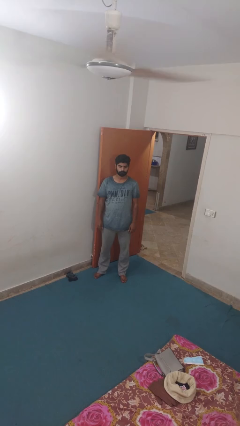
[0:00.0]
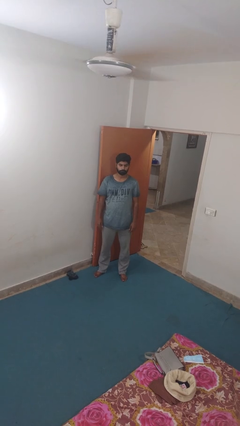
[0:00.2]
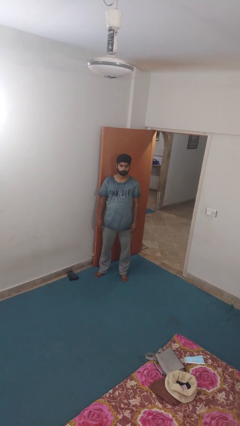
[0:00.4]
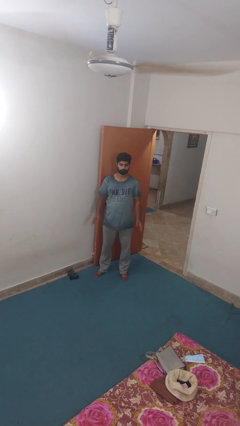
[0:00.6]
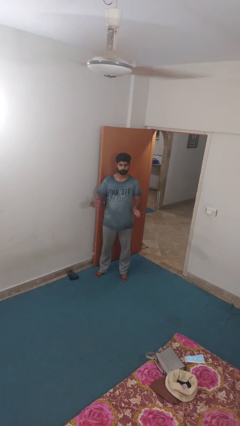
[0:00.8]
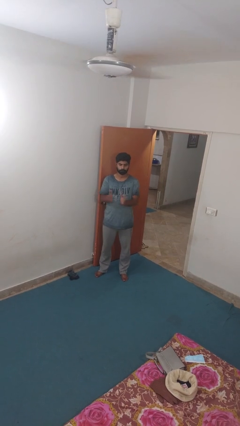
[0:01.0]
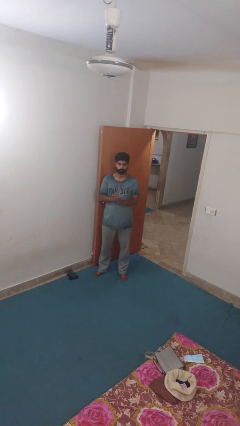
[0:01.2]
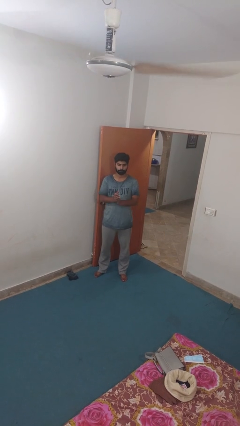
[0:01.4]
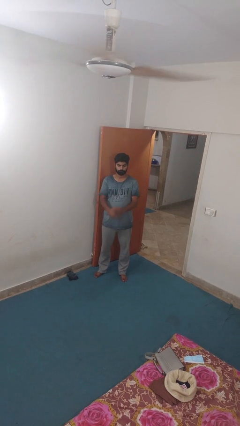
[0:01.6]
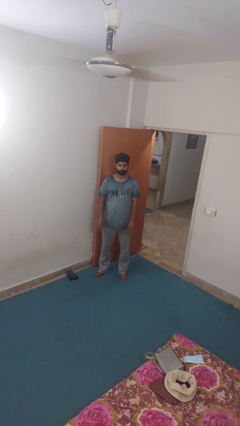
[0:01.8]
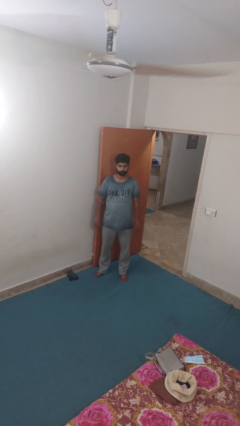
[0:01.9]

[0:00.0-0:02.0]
person claps hands

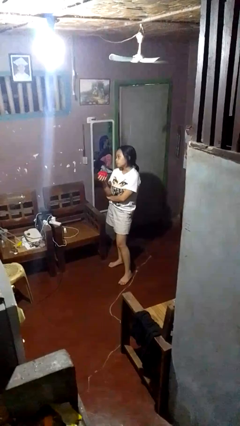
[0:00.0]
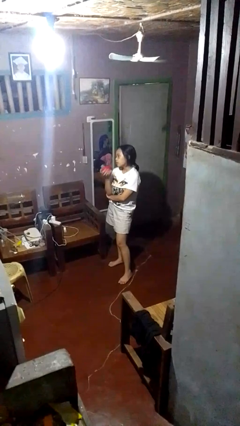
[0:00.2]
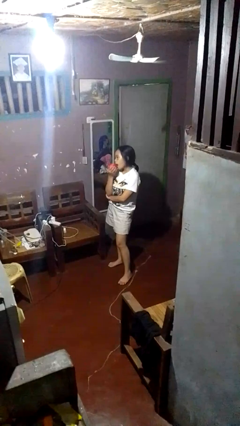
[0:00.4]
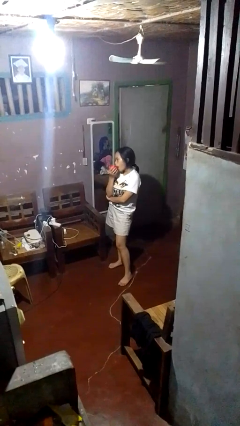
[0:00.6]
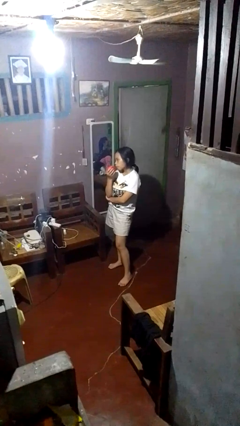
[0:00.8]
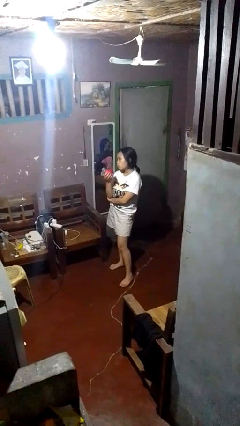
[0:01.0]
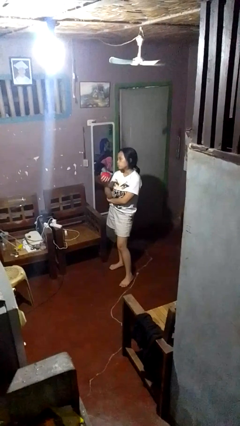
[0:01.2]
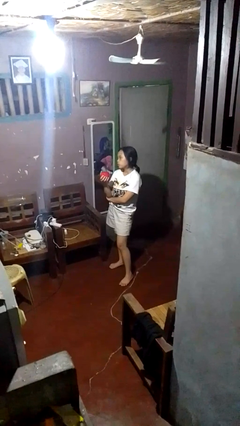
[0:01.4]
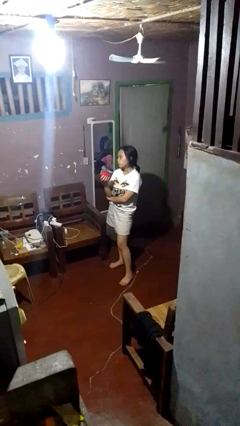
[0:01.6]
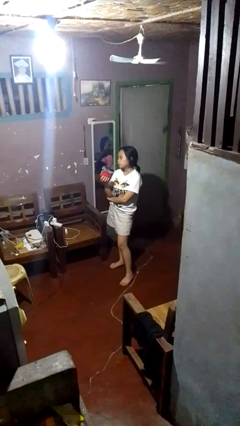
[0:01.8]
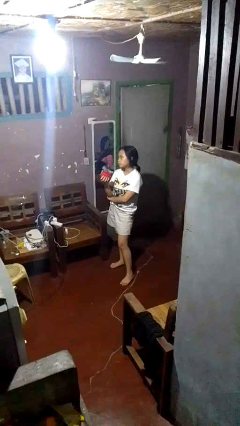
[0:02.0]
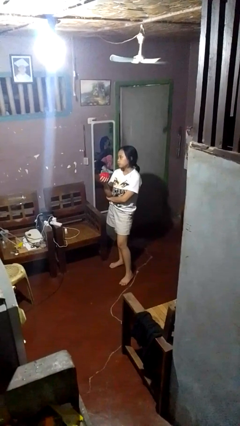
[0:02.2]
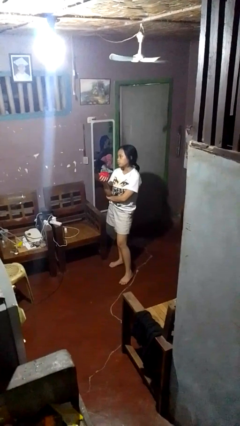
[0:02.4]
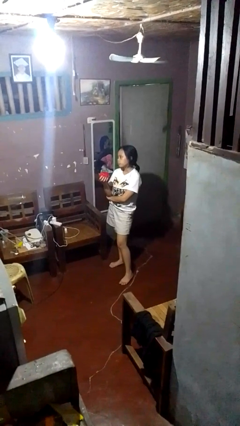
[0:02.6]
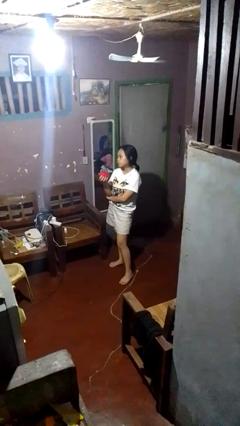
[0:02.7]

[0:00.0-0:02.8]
person eats apple

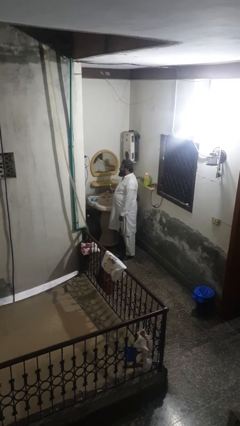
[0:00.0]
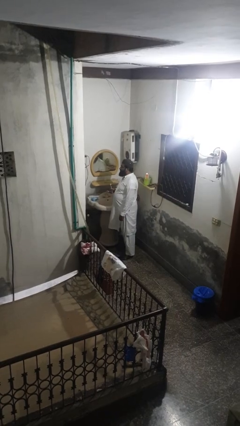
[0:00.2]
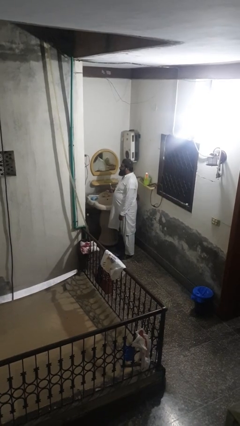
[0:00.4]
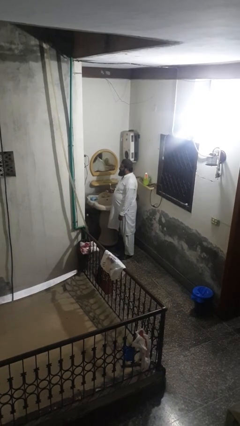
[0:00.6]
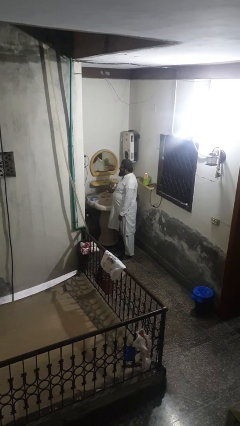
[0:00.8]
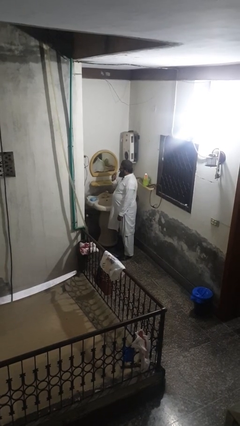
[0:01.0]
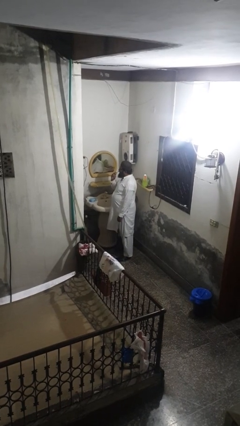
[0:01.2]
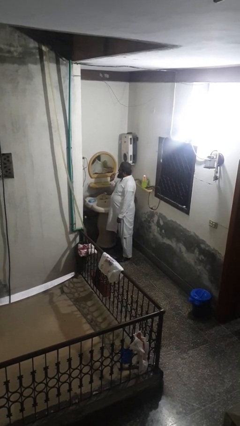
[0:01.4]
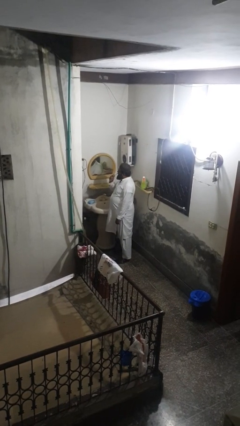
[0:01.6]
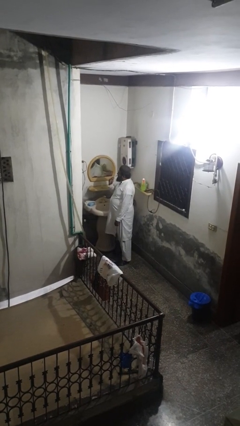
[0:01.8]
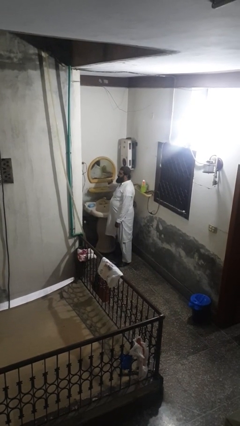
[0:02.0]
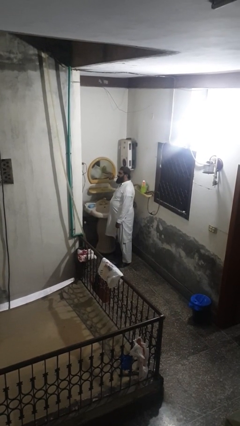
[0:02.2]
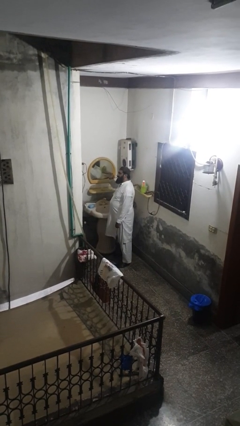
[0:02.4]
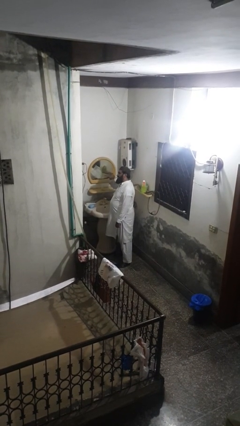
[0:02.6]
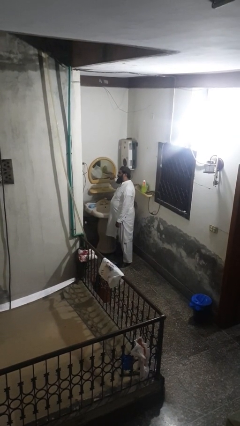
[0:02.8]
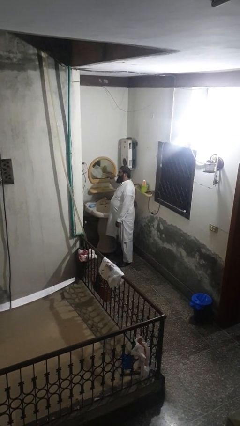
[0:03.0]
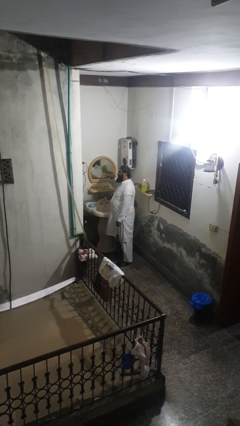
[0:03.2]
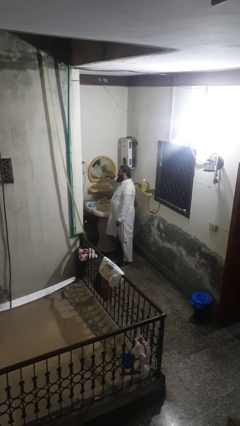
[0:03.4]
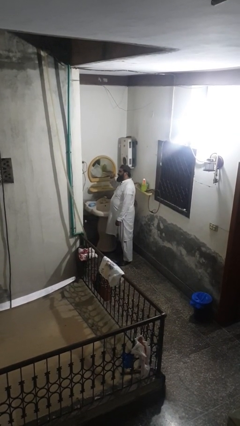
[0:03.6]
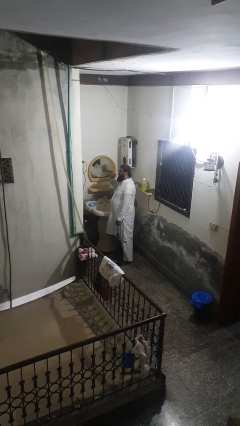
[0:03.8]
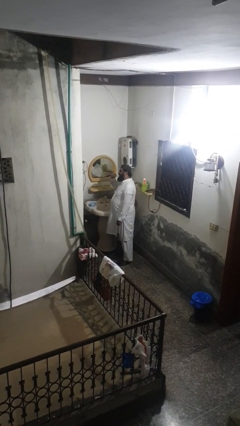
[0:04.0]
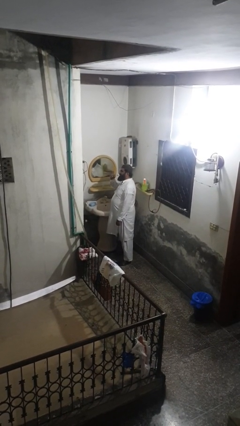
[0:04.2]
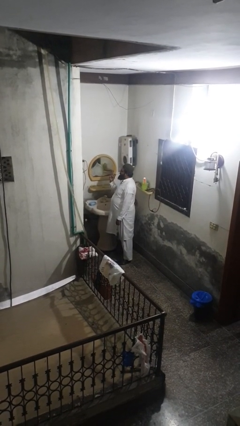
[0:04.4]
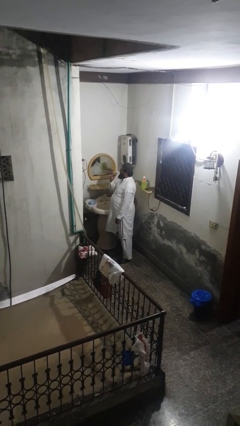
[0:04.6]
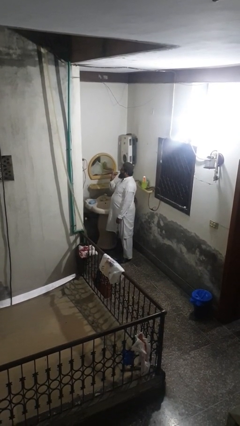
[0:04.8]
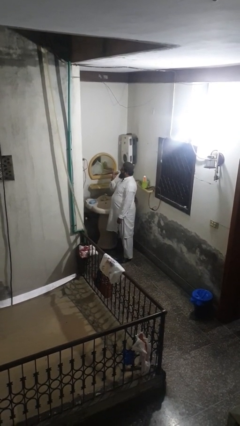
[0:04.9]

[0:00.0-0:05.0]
person brushes teeth

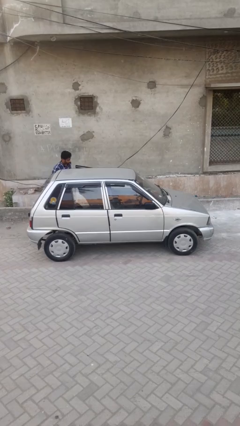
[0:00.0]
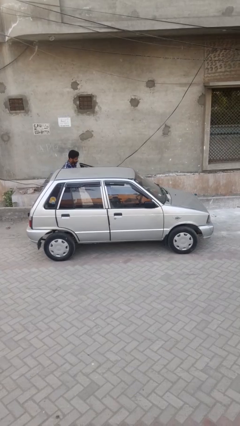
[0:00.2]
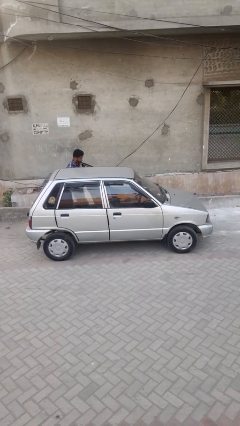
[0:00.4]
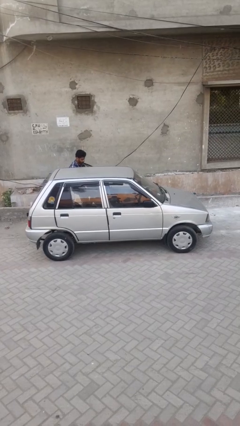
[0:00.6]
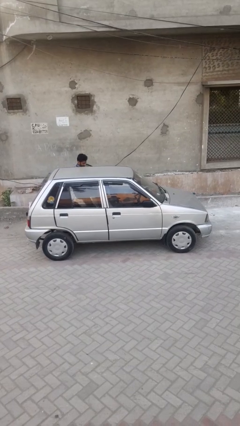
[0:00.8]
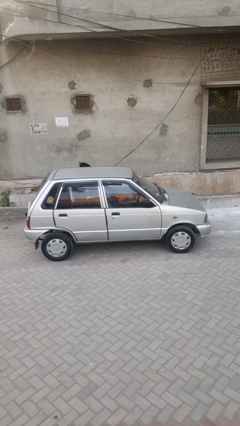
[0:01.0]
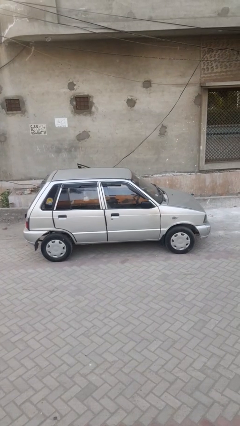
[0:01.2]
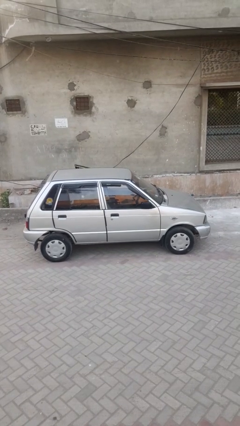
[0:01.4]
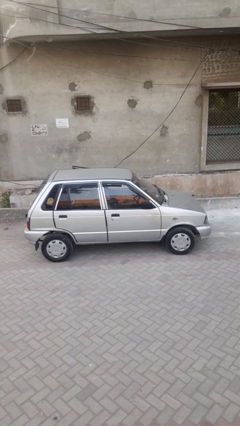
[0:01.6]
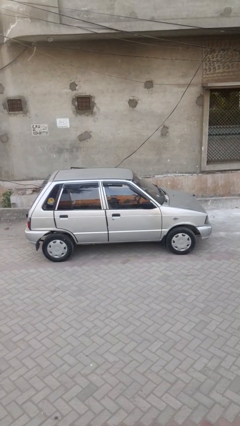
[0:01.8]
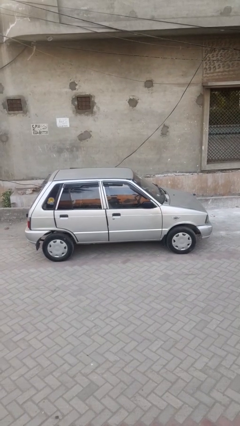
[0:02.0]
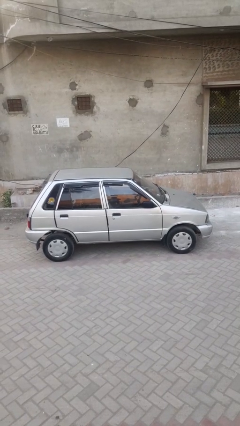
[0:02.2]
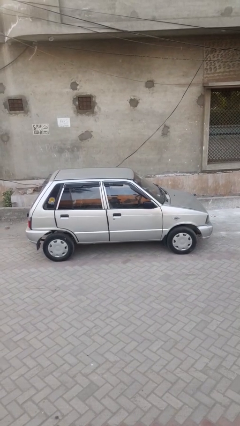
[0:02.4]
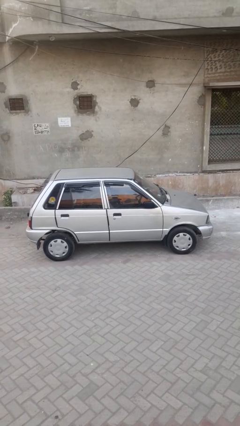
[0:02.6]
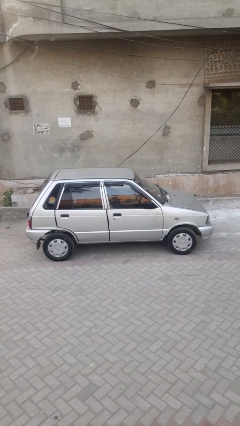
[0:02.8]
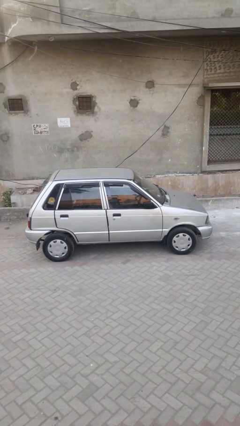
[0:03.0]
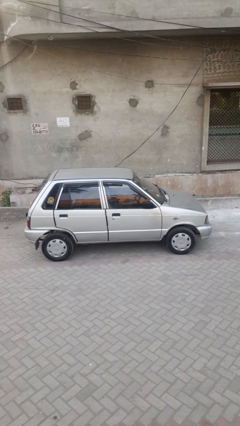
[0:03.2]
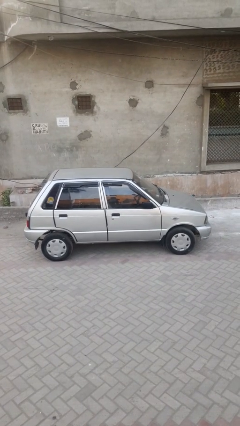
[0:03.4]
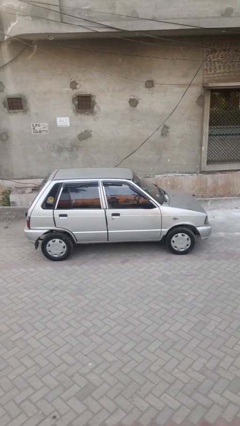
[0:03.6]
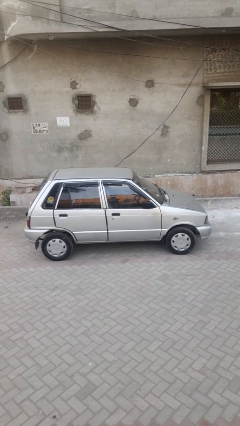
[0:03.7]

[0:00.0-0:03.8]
car picks up person

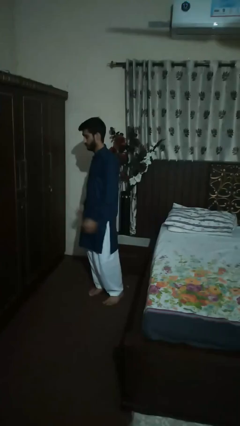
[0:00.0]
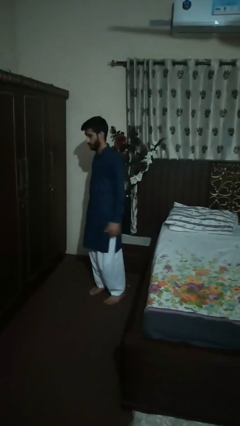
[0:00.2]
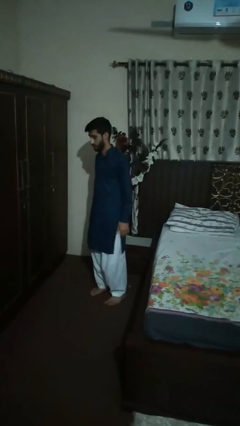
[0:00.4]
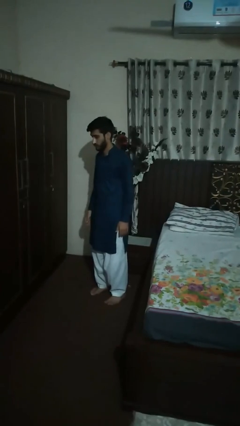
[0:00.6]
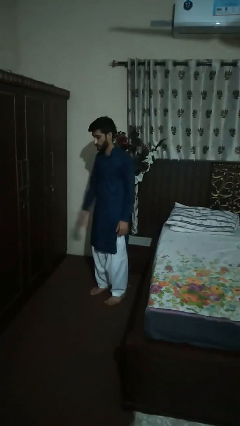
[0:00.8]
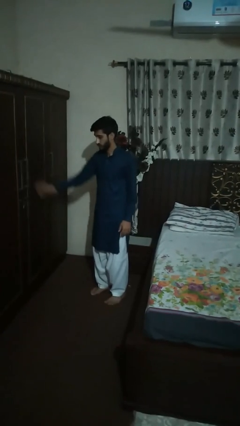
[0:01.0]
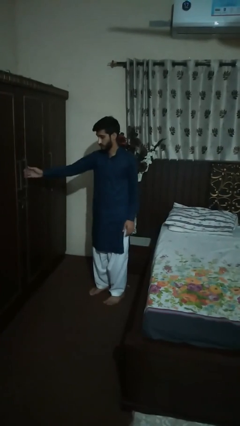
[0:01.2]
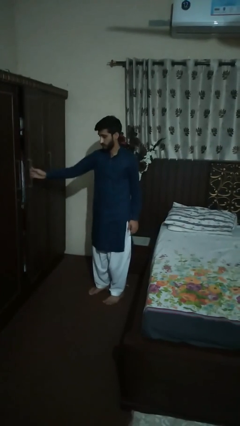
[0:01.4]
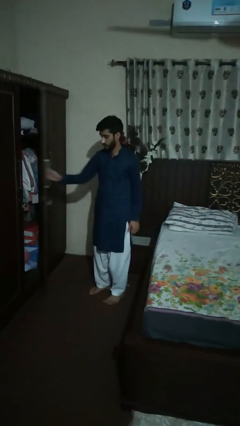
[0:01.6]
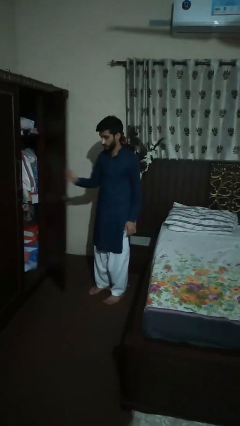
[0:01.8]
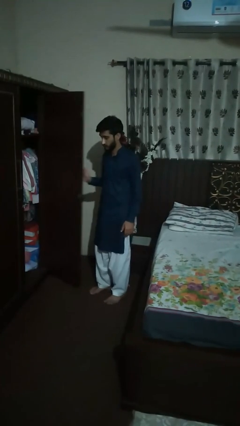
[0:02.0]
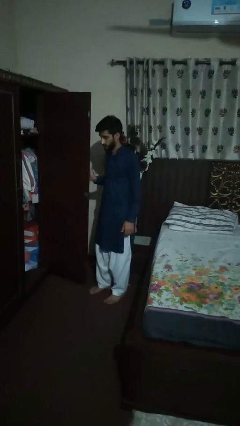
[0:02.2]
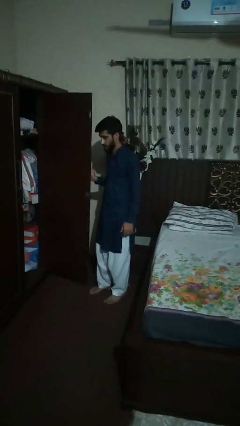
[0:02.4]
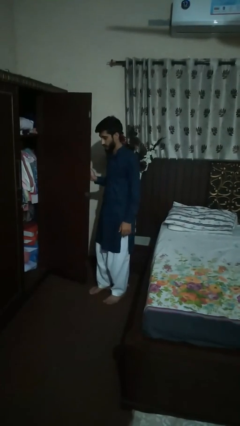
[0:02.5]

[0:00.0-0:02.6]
person opens dresser drawer

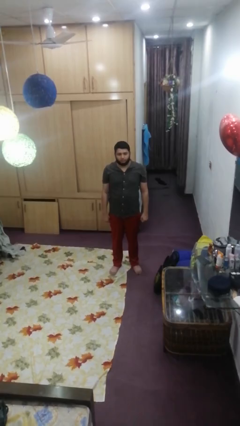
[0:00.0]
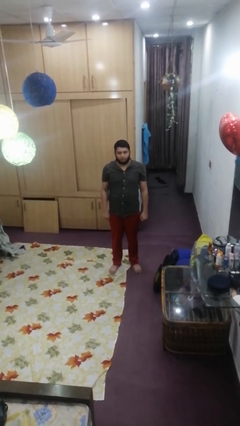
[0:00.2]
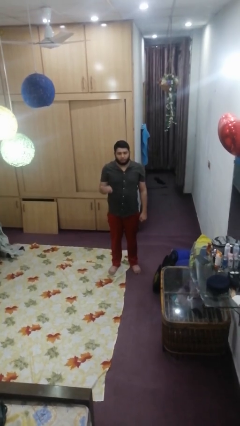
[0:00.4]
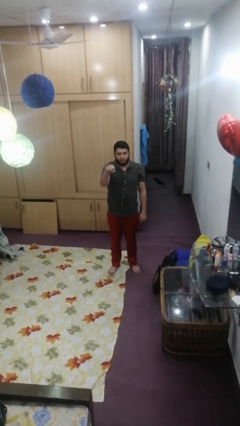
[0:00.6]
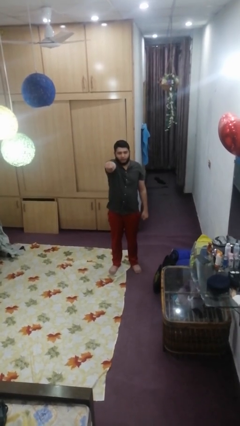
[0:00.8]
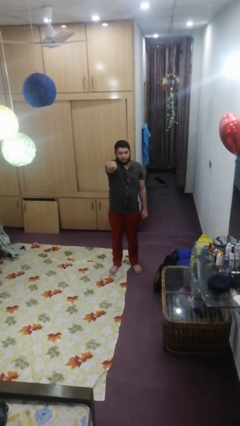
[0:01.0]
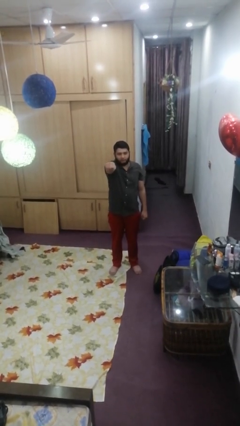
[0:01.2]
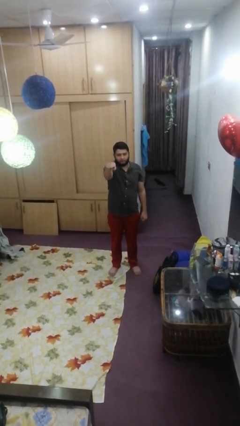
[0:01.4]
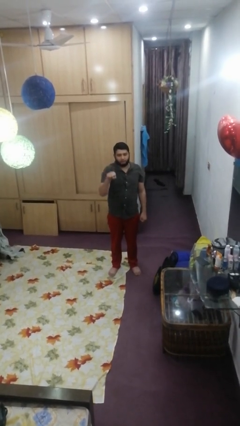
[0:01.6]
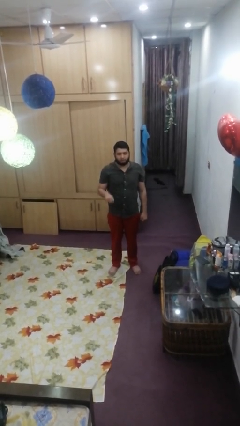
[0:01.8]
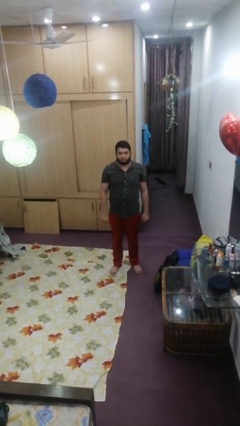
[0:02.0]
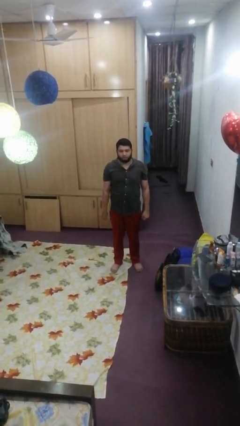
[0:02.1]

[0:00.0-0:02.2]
person punches
